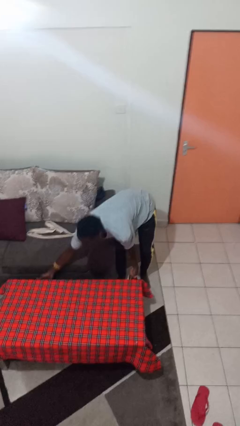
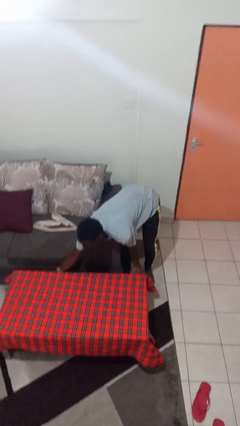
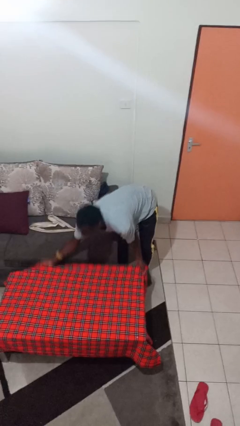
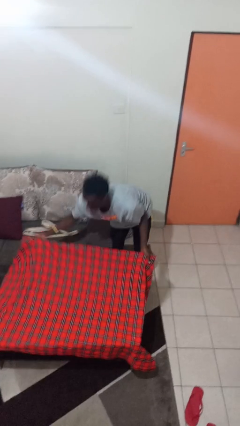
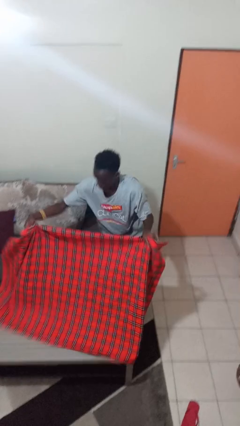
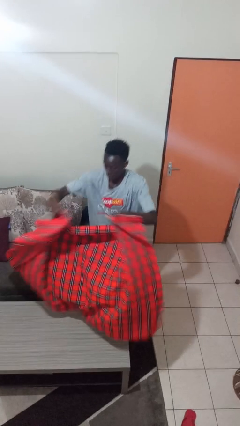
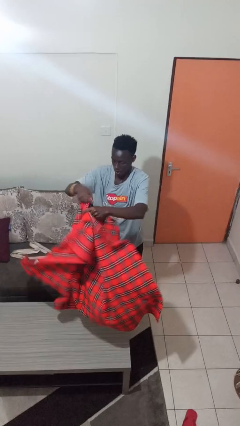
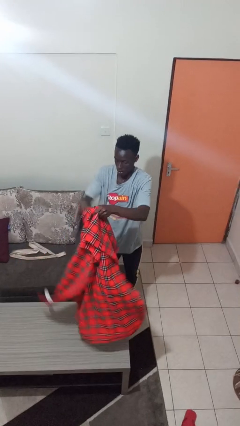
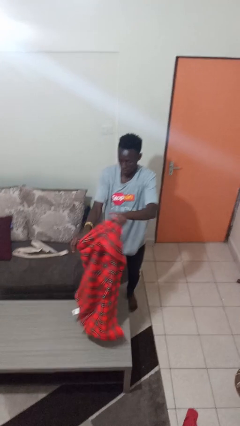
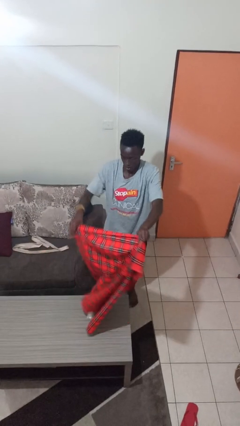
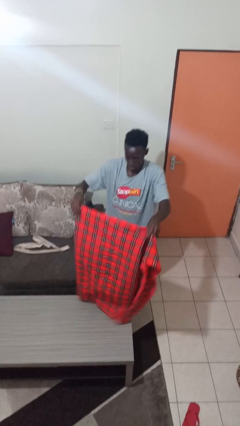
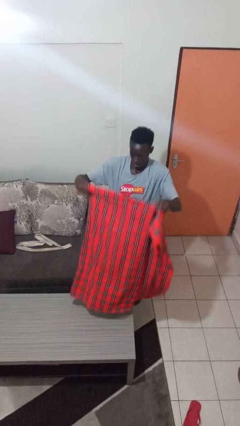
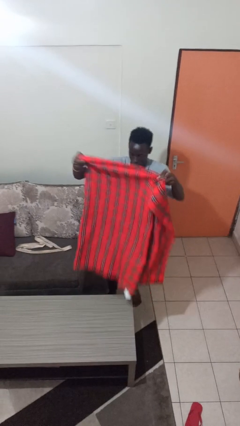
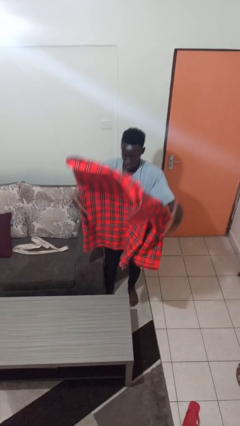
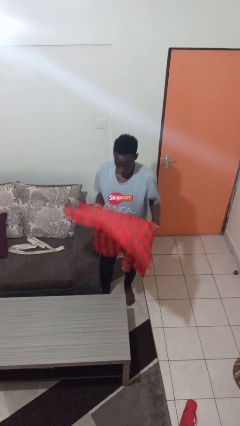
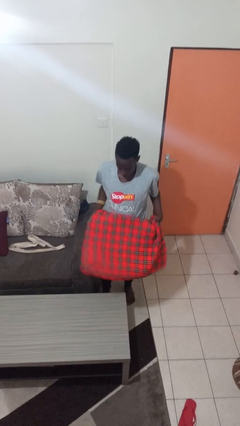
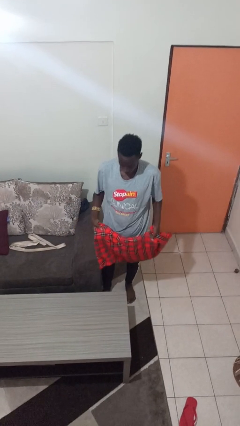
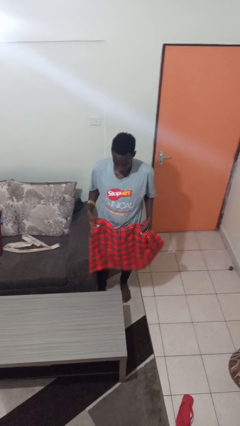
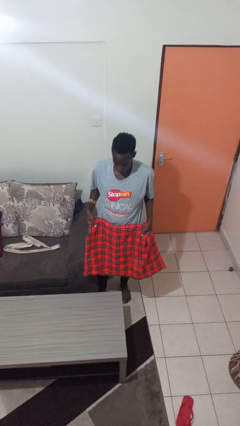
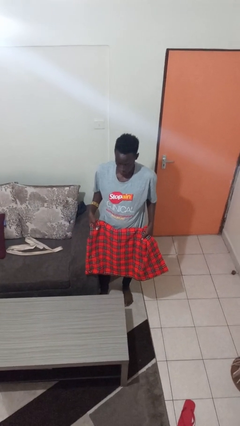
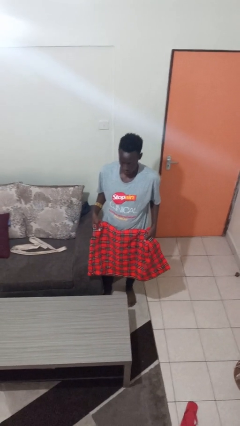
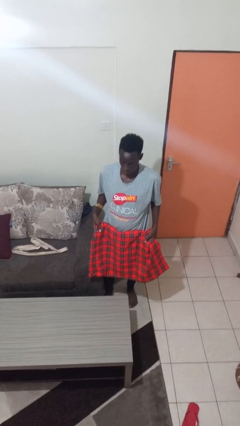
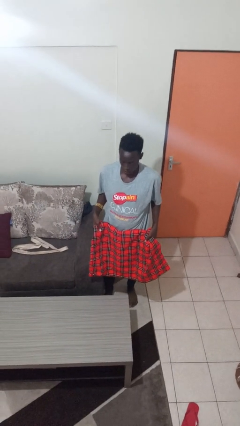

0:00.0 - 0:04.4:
person folds tablecloth

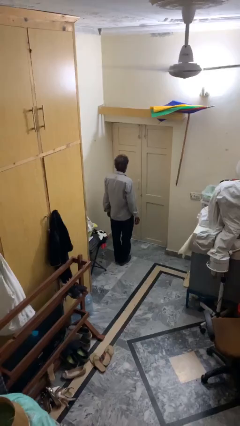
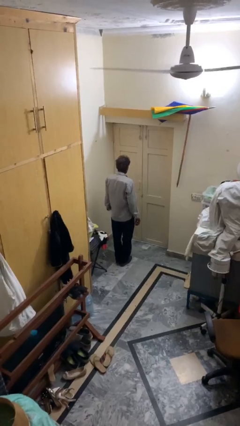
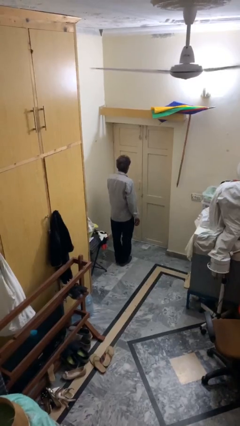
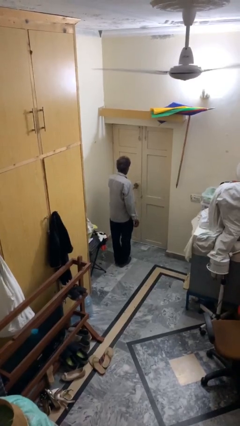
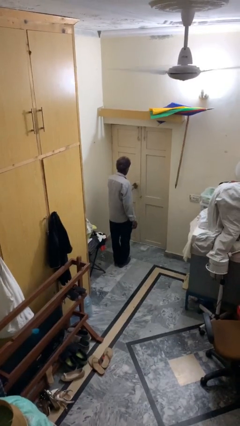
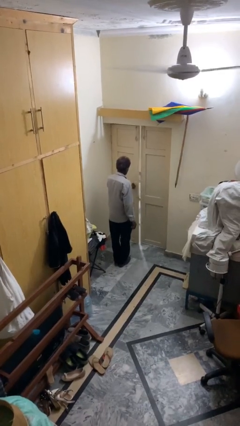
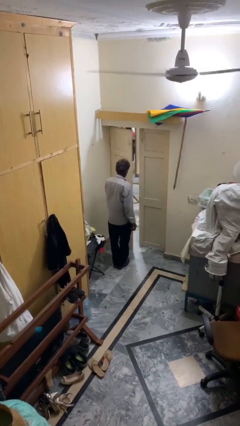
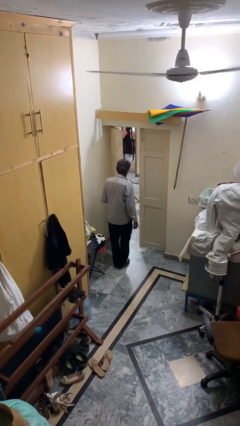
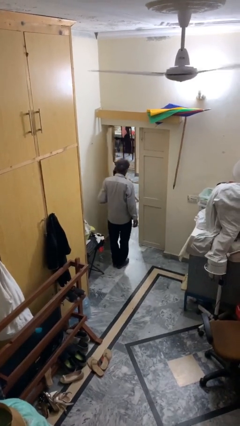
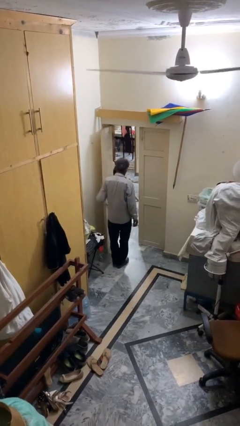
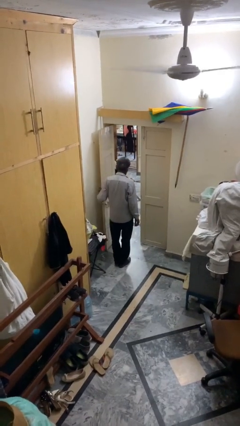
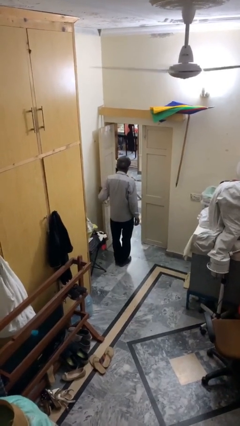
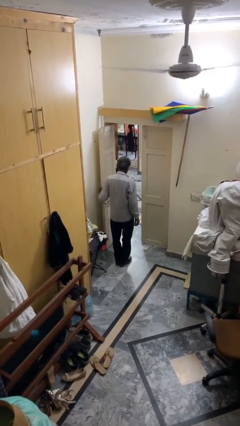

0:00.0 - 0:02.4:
person opens facility door

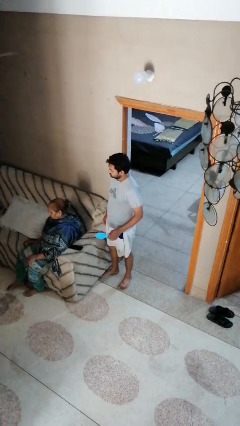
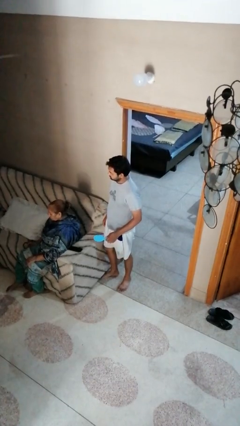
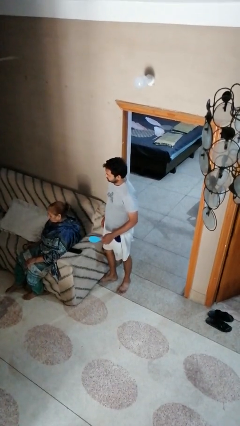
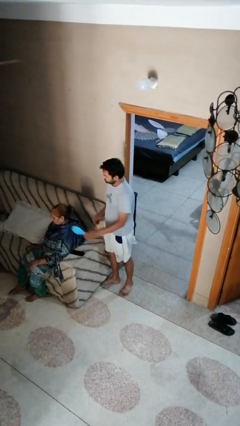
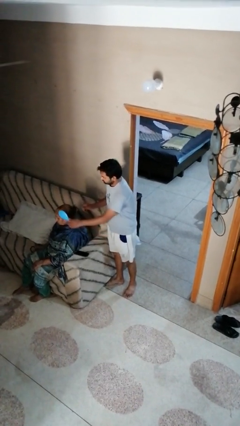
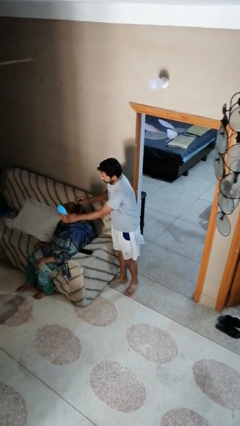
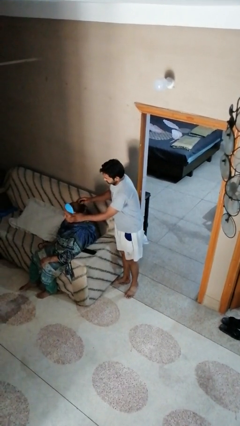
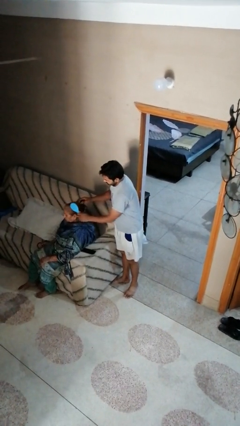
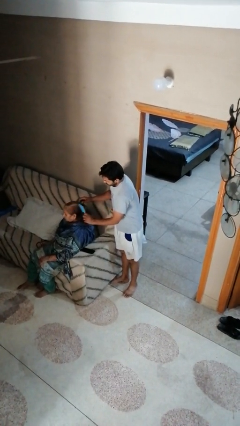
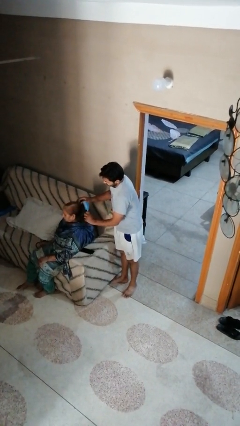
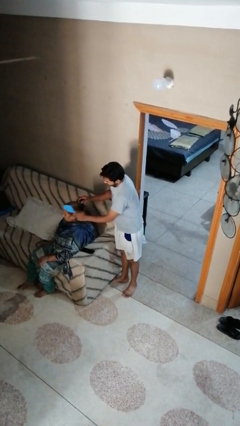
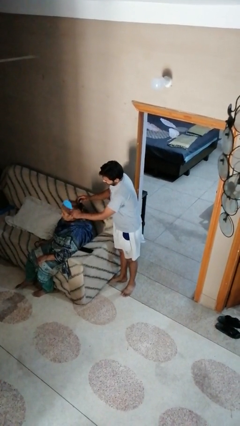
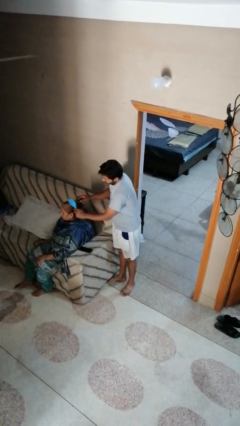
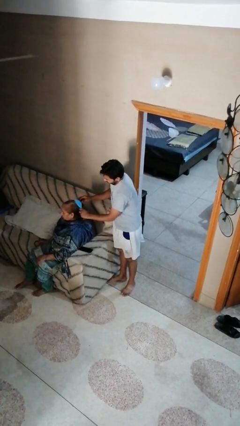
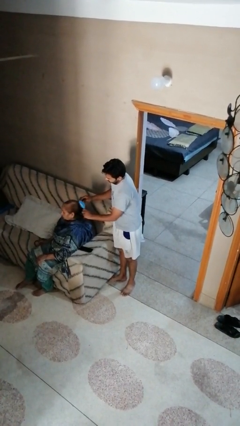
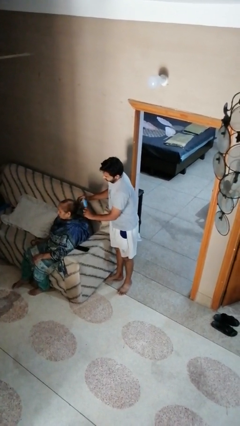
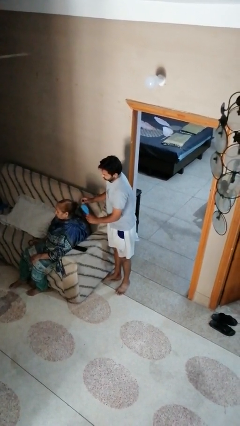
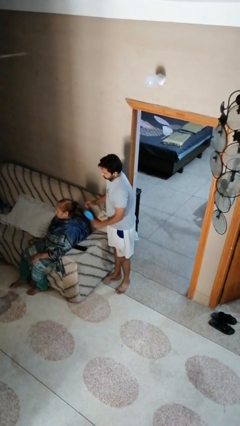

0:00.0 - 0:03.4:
person brushes hair of person

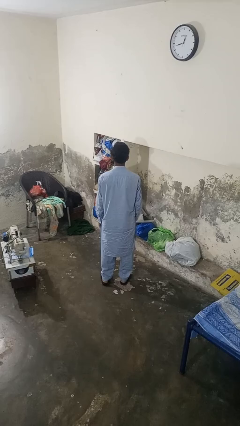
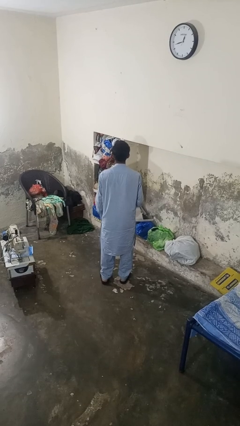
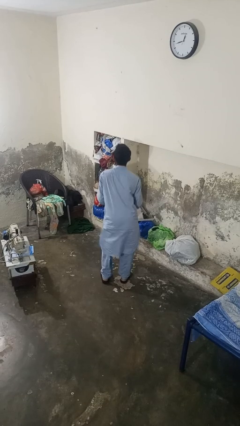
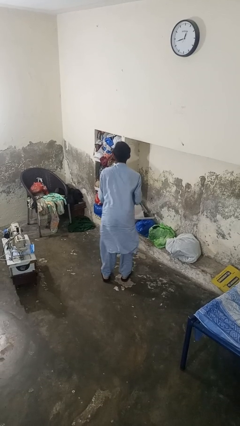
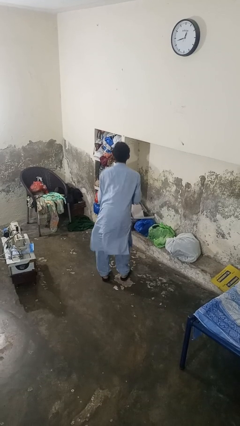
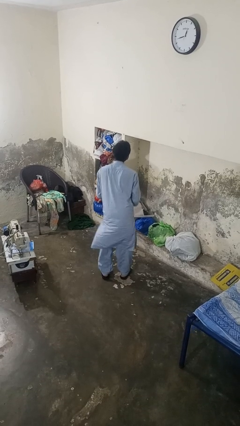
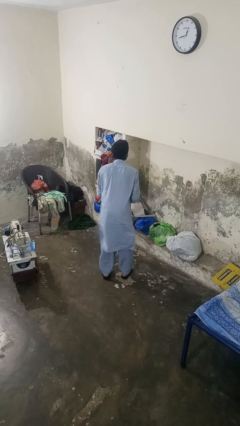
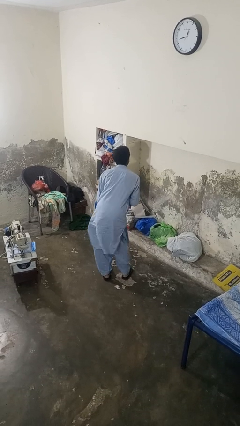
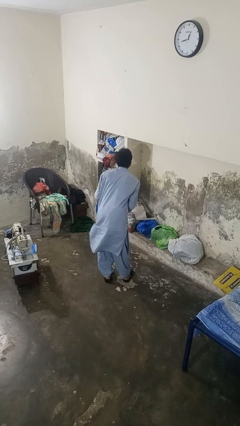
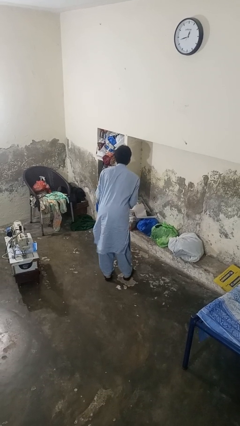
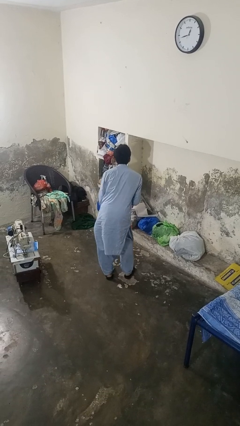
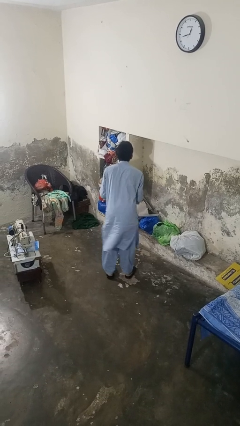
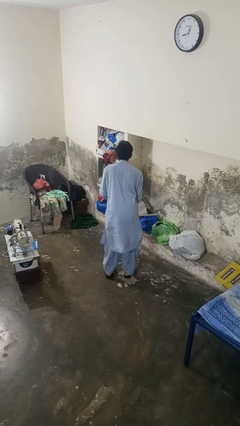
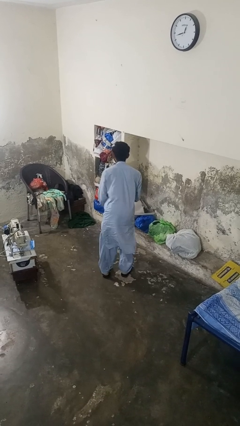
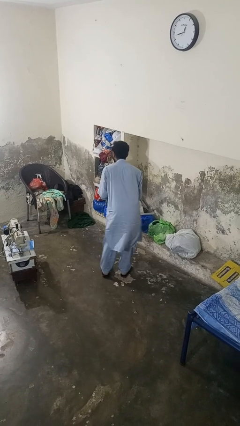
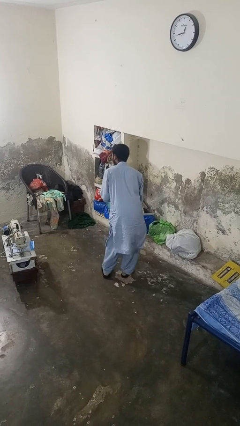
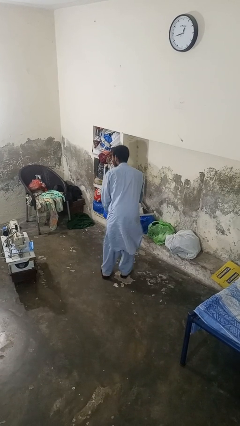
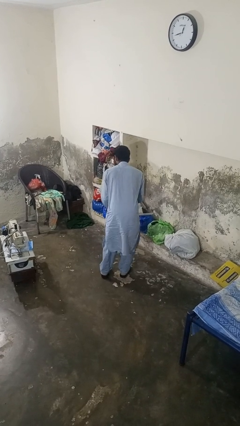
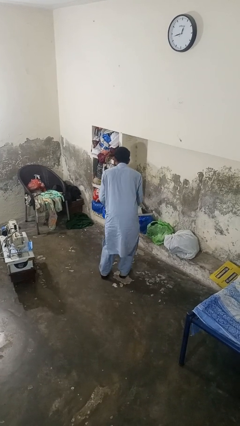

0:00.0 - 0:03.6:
person wiggles hips

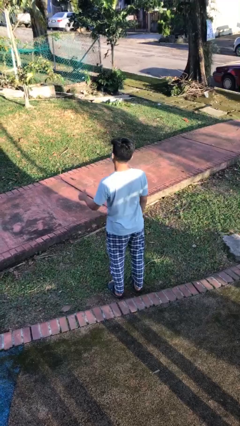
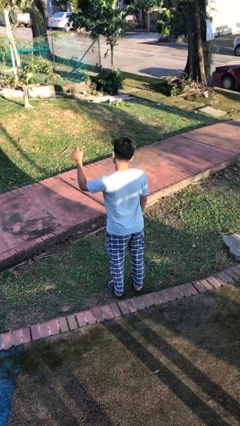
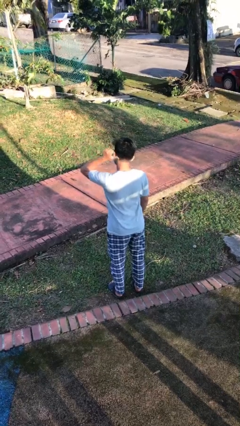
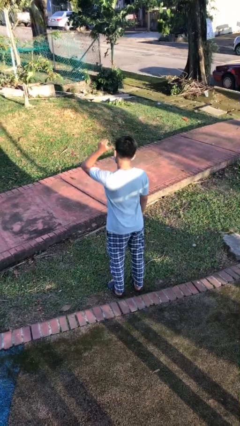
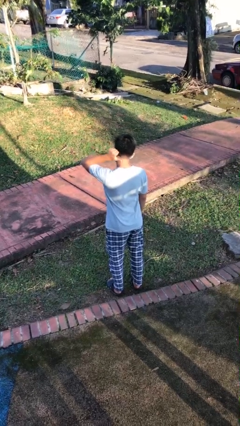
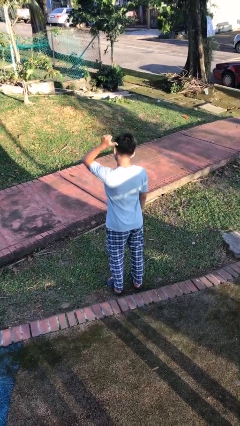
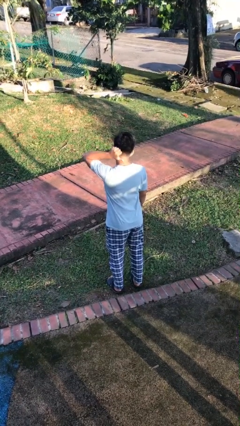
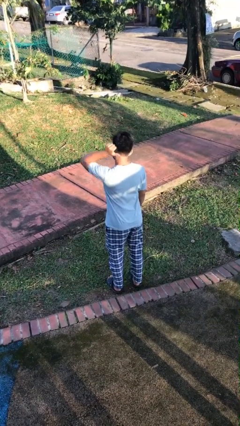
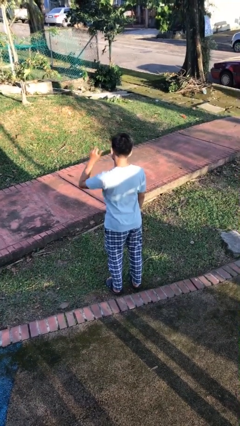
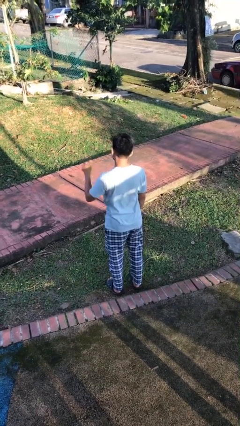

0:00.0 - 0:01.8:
person gestures behind me

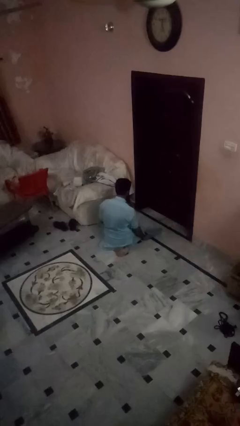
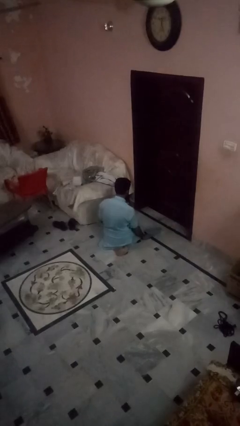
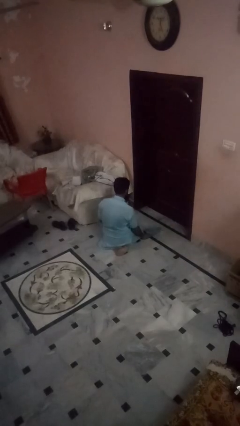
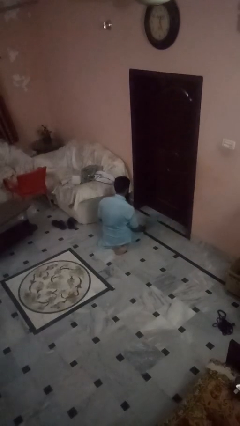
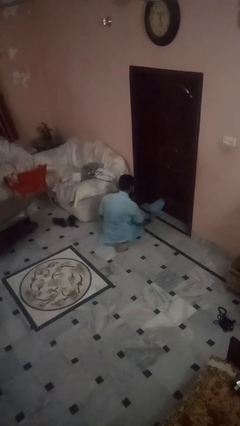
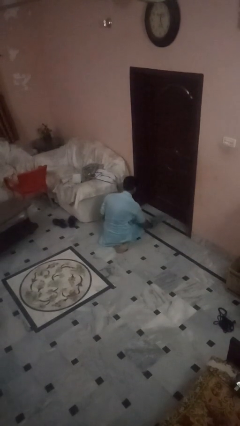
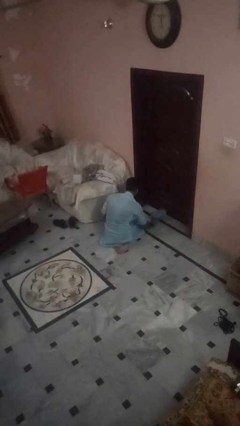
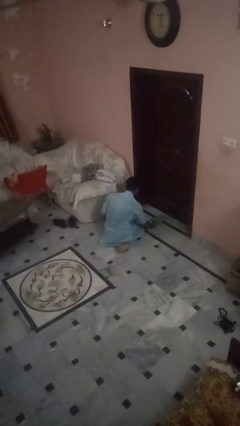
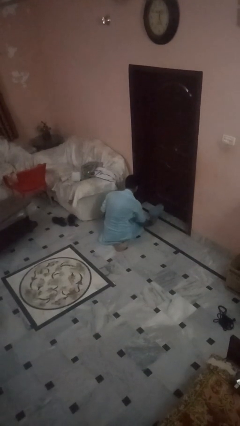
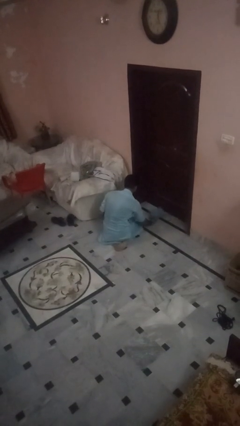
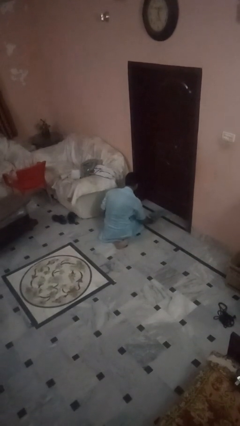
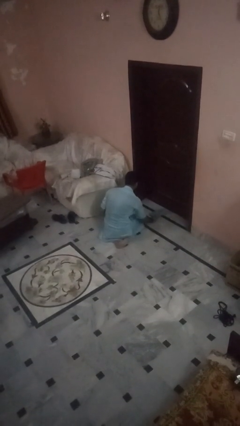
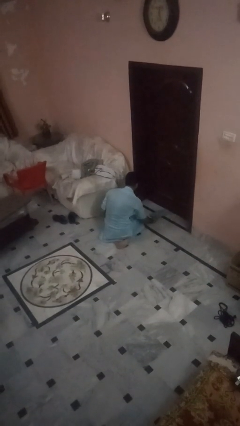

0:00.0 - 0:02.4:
person swats bug
